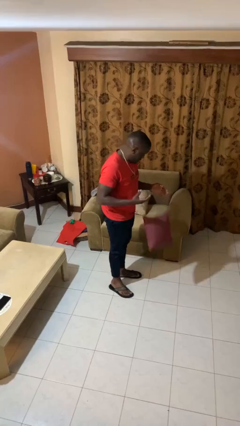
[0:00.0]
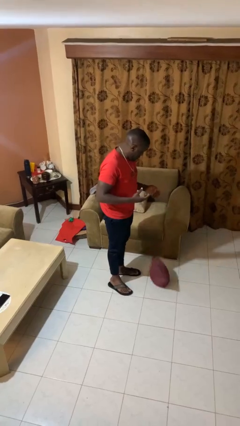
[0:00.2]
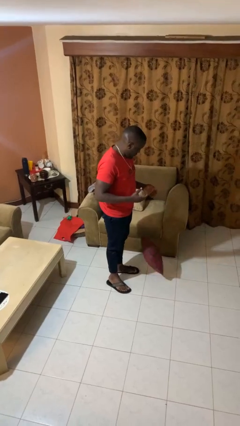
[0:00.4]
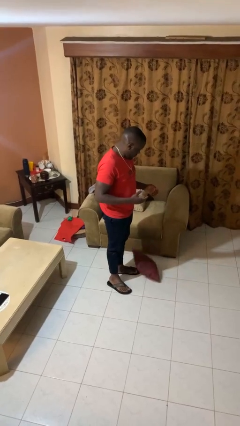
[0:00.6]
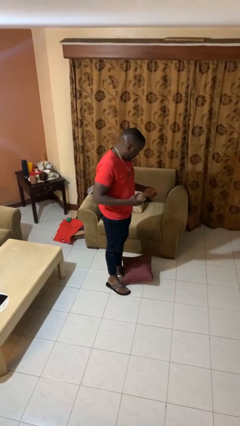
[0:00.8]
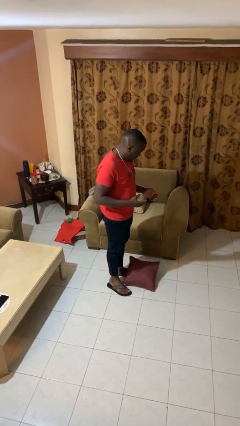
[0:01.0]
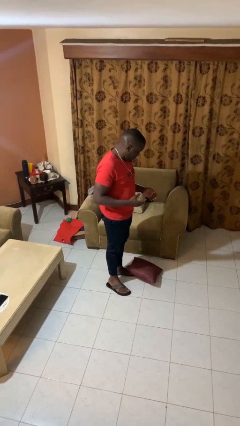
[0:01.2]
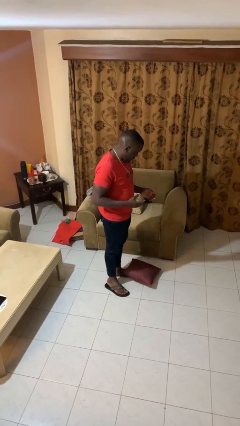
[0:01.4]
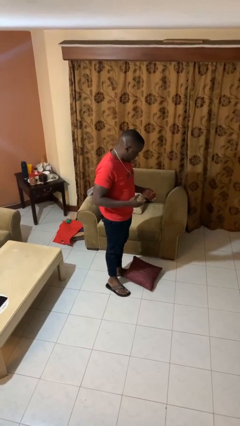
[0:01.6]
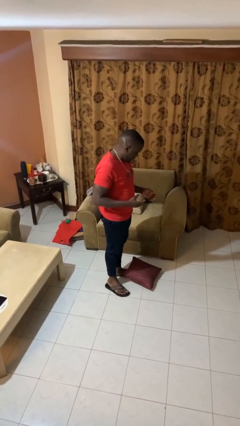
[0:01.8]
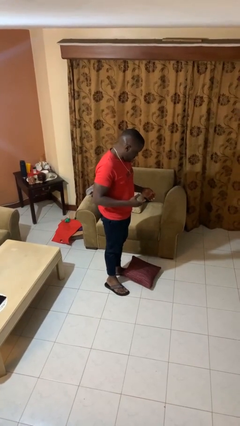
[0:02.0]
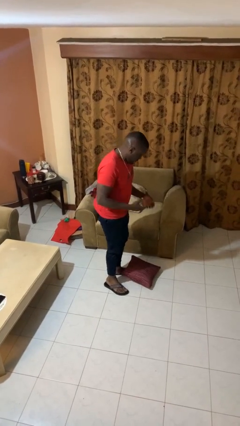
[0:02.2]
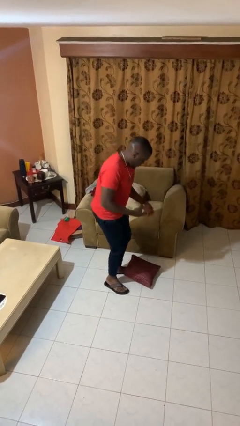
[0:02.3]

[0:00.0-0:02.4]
person drops object

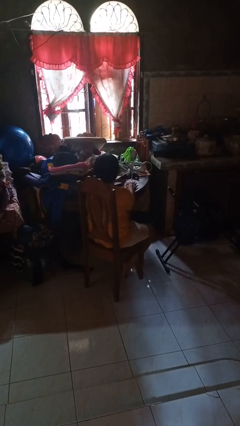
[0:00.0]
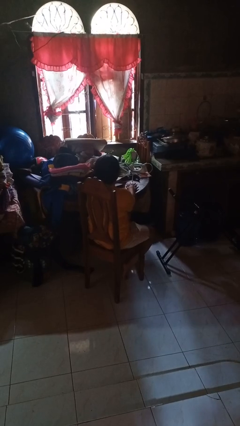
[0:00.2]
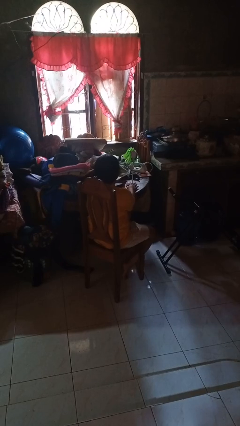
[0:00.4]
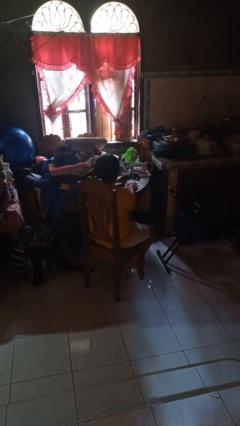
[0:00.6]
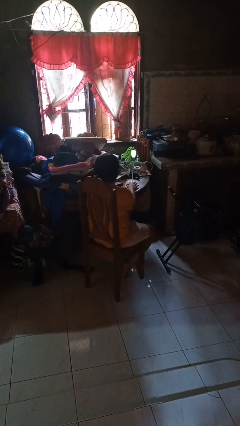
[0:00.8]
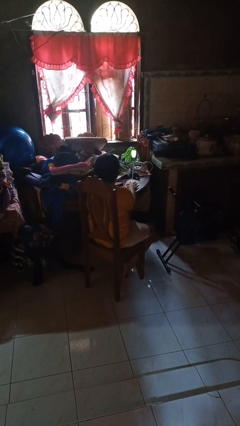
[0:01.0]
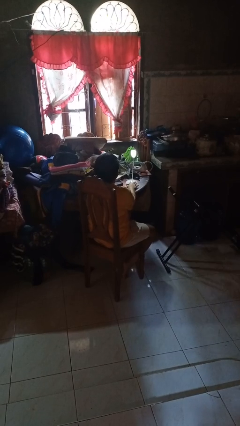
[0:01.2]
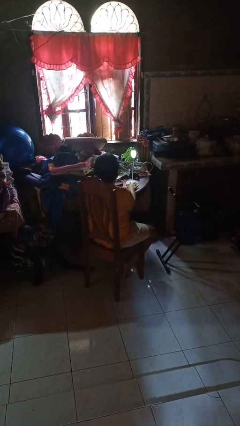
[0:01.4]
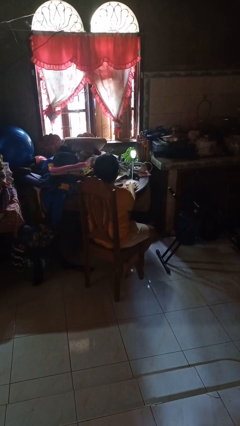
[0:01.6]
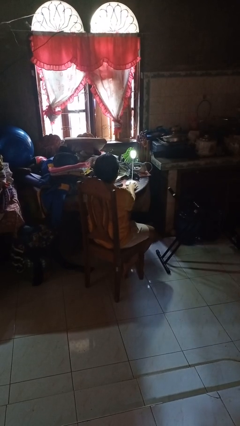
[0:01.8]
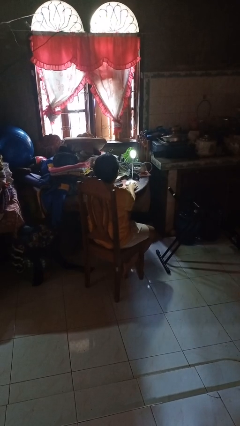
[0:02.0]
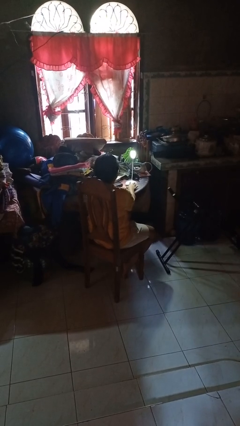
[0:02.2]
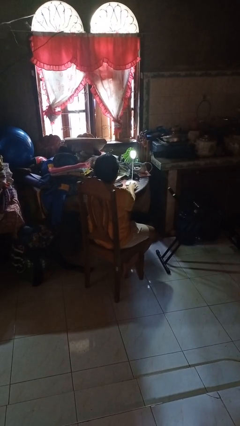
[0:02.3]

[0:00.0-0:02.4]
person turns on lamp

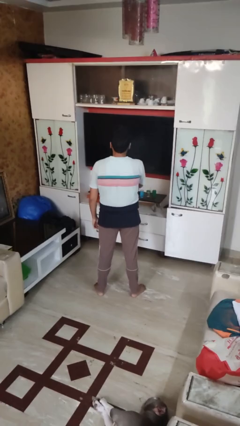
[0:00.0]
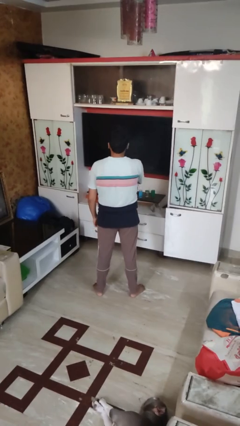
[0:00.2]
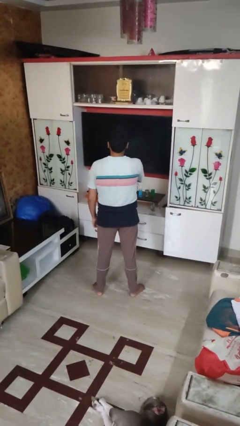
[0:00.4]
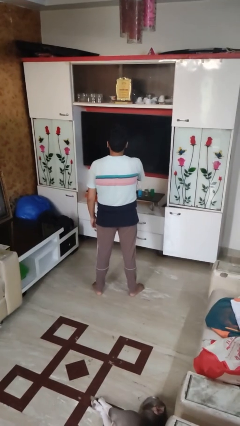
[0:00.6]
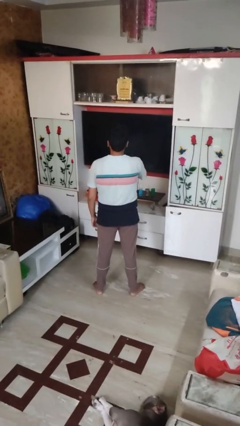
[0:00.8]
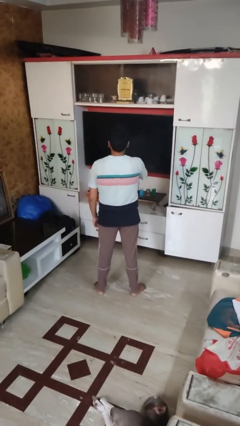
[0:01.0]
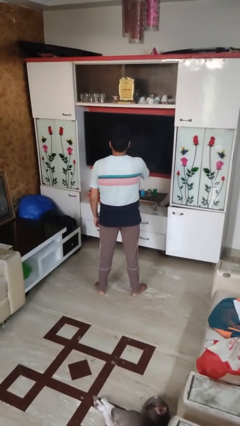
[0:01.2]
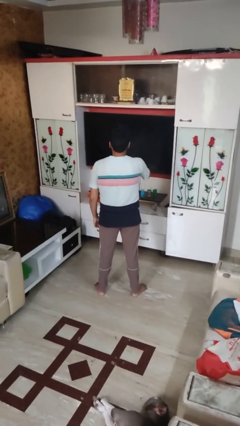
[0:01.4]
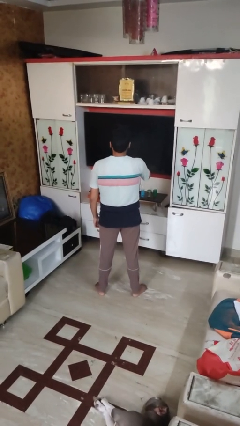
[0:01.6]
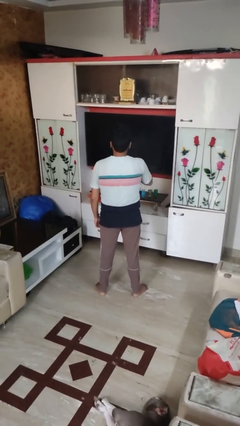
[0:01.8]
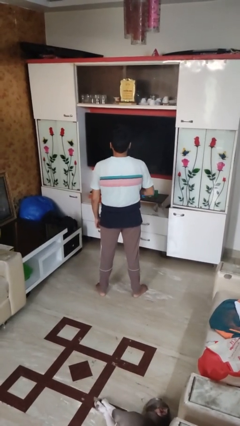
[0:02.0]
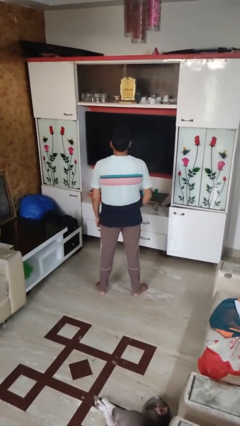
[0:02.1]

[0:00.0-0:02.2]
person gestures be quiet

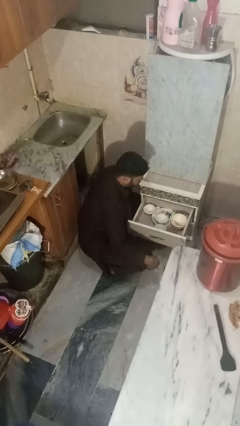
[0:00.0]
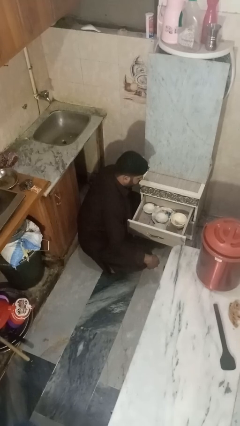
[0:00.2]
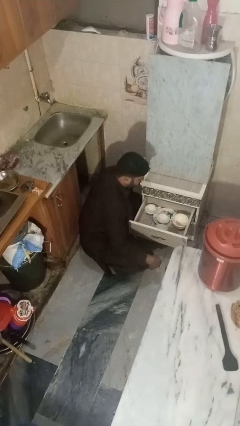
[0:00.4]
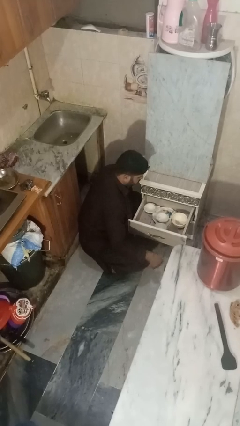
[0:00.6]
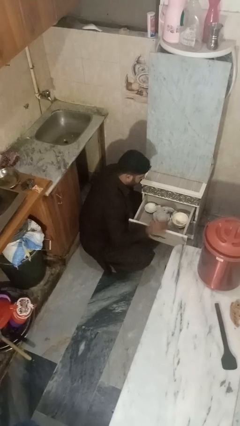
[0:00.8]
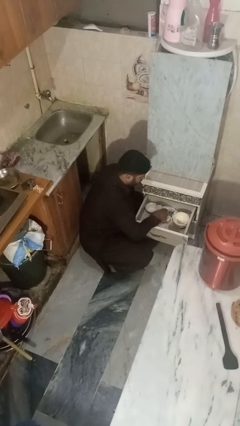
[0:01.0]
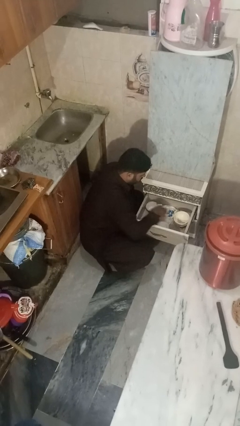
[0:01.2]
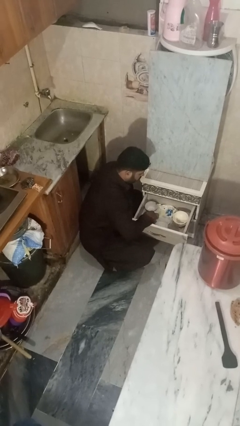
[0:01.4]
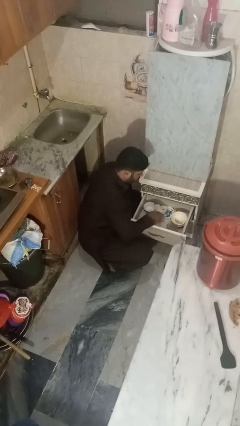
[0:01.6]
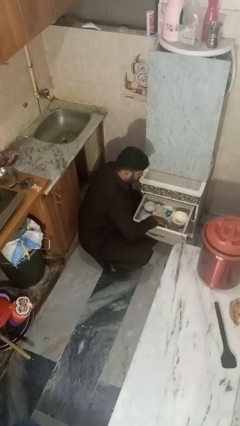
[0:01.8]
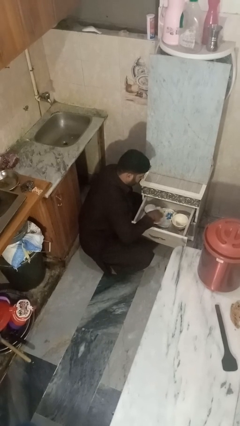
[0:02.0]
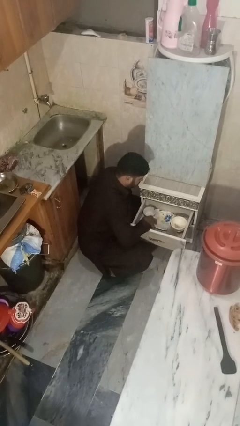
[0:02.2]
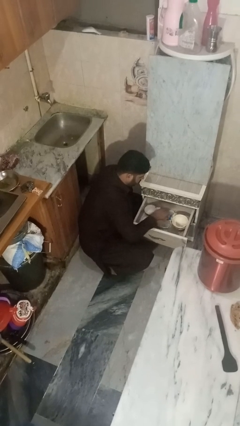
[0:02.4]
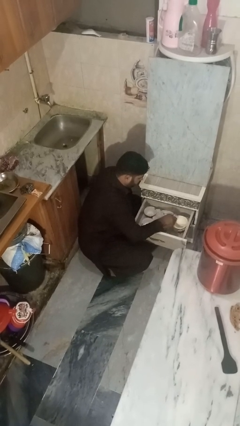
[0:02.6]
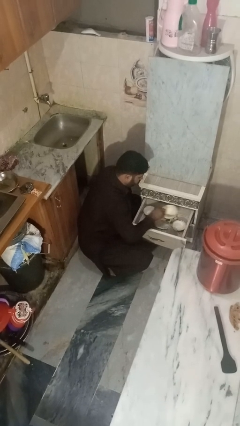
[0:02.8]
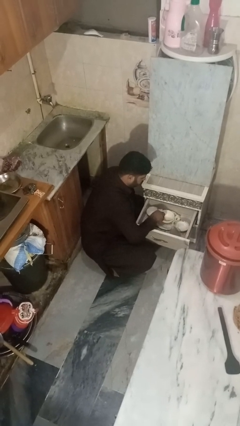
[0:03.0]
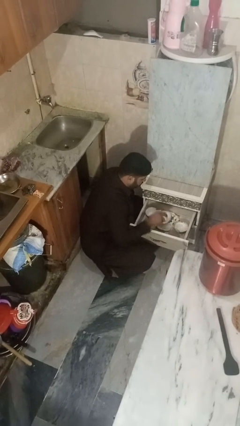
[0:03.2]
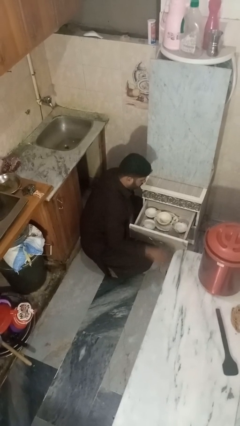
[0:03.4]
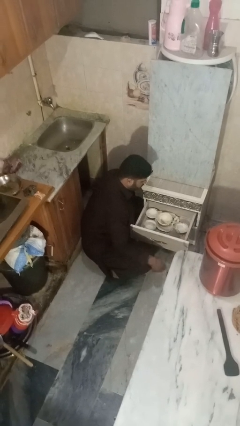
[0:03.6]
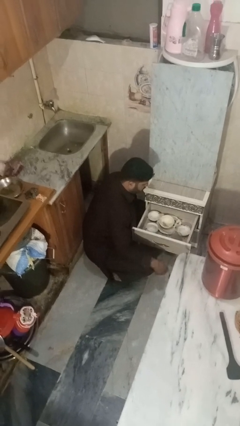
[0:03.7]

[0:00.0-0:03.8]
person searches in kitchen drawer

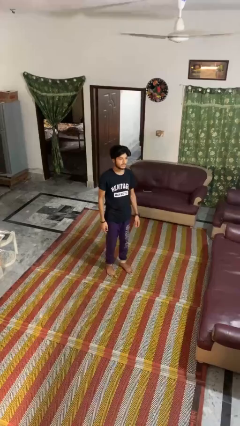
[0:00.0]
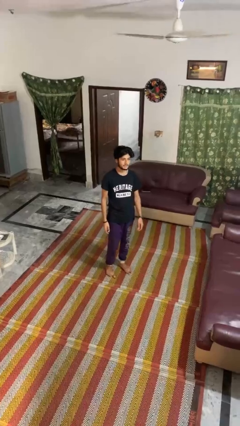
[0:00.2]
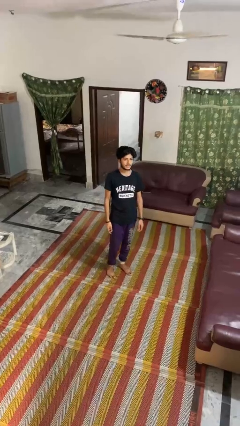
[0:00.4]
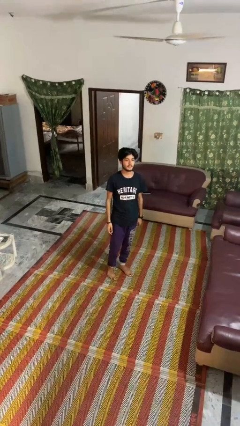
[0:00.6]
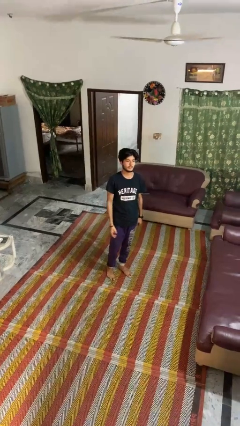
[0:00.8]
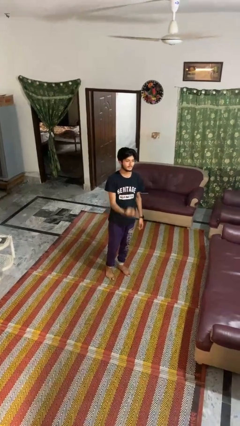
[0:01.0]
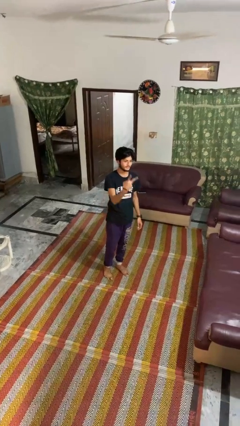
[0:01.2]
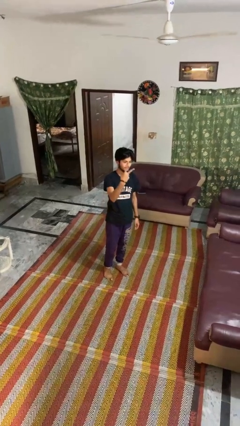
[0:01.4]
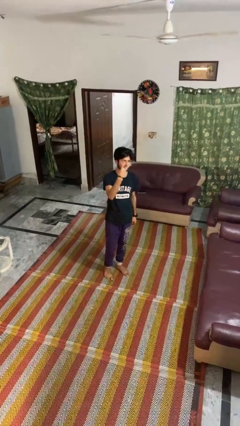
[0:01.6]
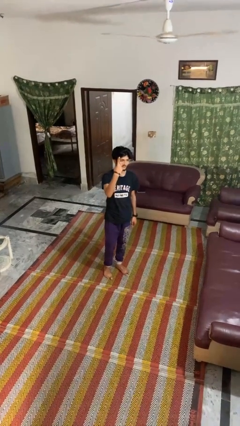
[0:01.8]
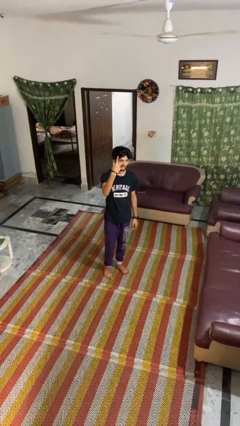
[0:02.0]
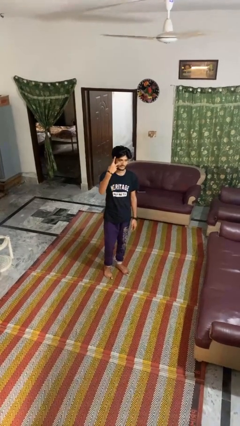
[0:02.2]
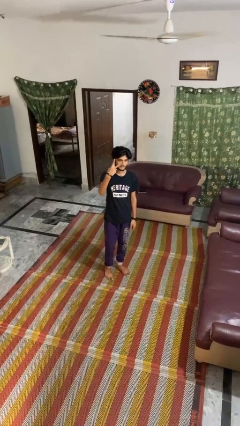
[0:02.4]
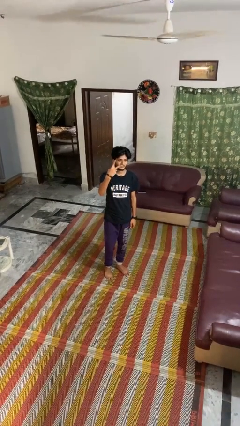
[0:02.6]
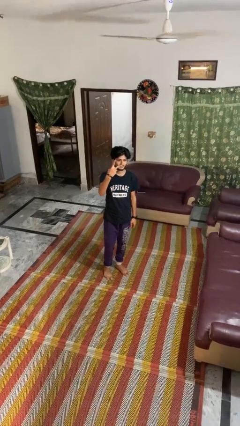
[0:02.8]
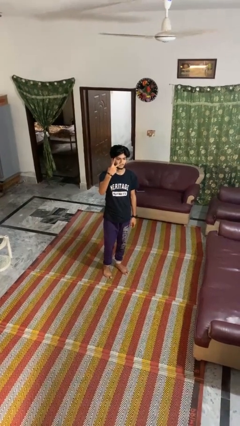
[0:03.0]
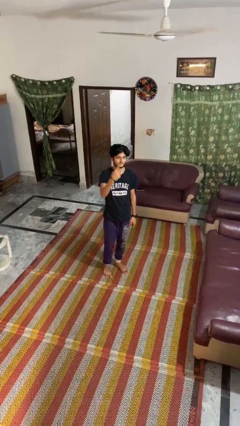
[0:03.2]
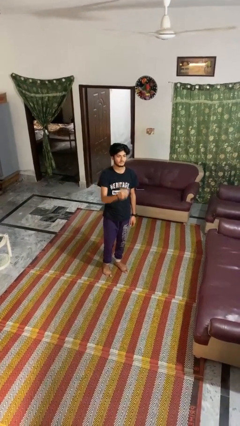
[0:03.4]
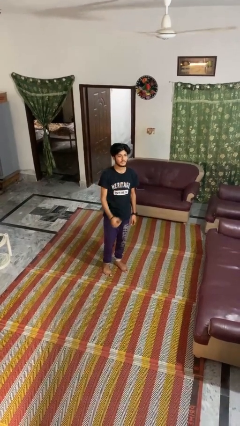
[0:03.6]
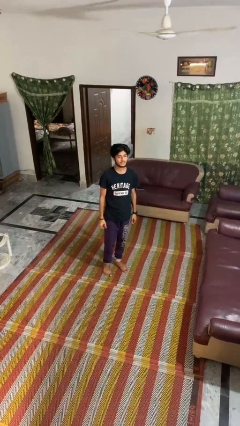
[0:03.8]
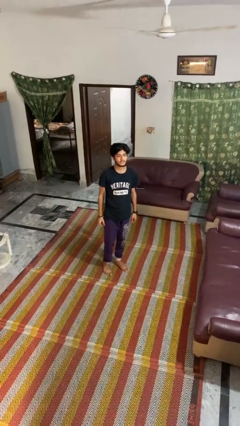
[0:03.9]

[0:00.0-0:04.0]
person gestures peace

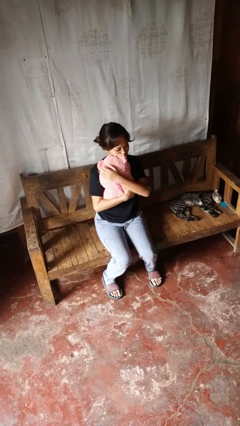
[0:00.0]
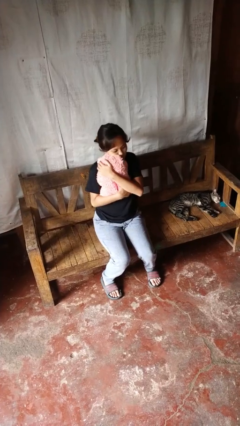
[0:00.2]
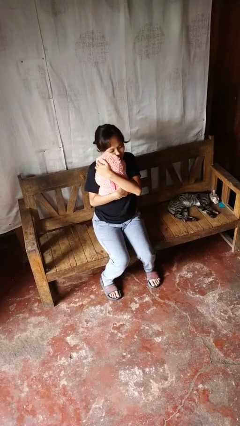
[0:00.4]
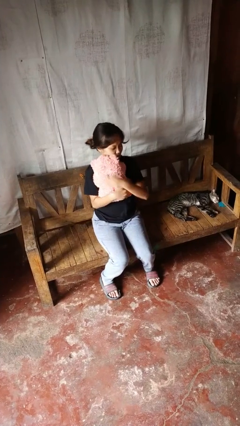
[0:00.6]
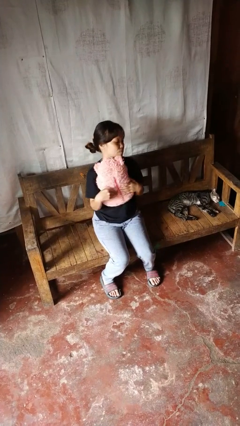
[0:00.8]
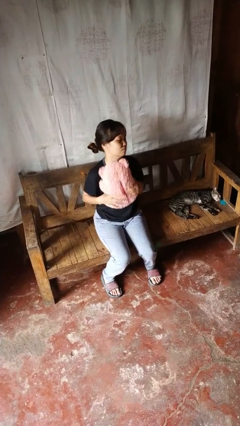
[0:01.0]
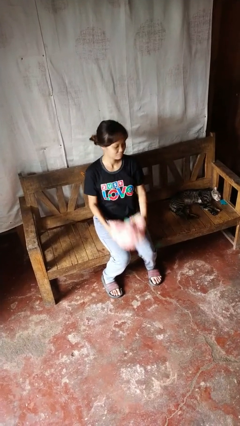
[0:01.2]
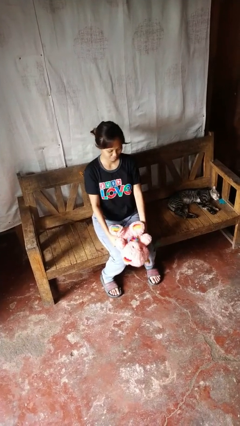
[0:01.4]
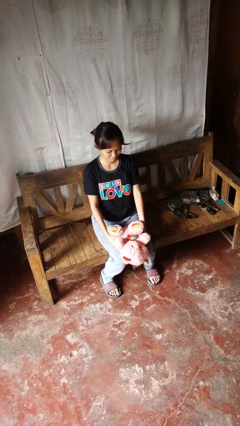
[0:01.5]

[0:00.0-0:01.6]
person hugs stuffed animal

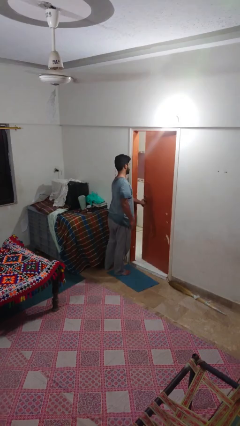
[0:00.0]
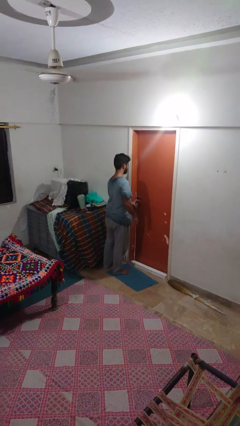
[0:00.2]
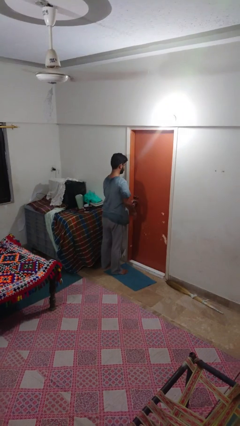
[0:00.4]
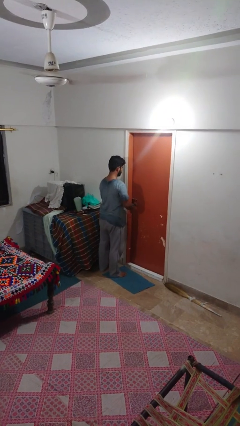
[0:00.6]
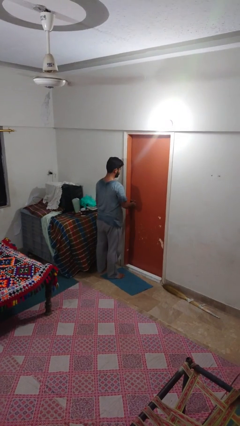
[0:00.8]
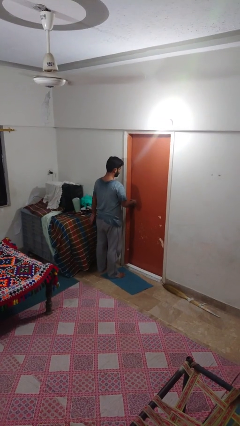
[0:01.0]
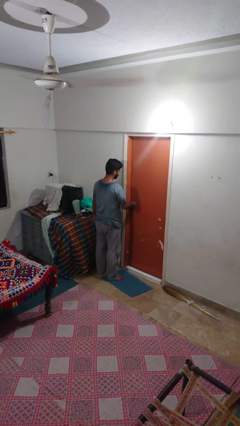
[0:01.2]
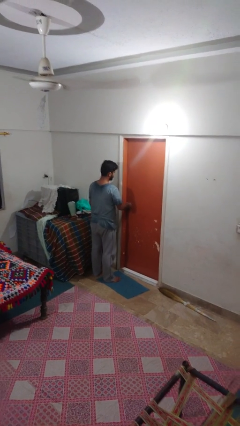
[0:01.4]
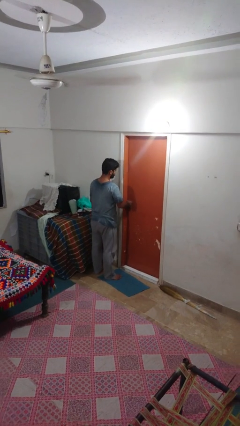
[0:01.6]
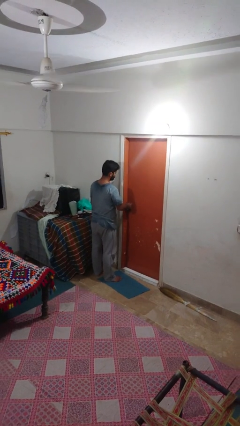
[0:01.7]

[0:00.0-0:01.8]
person closes facility door
